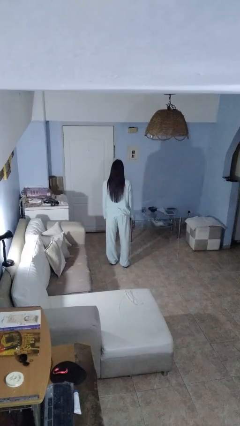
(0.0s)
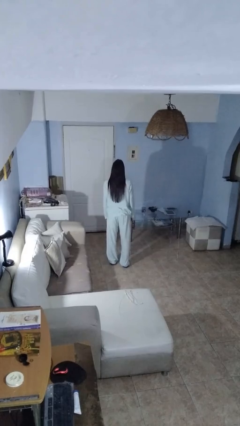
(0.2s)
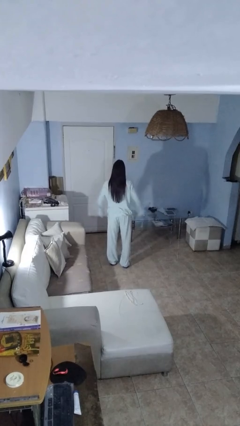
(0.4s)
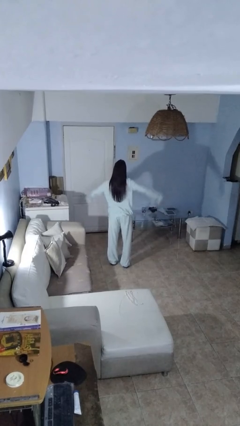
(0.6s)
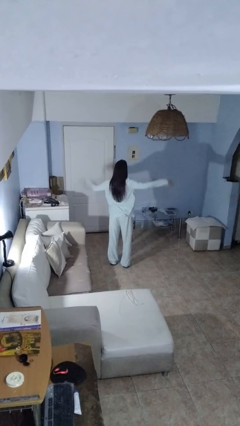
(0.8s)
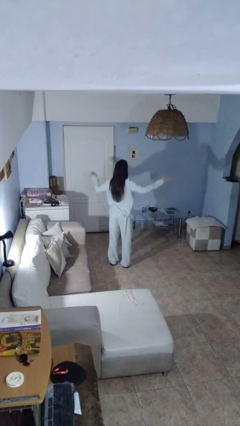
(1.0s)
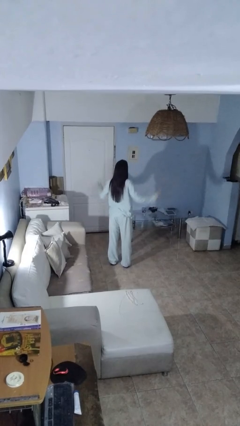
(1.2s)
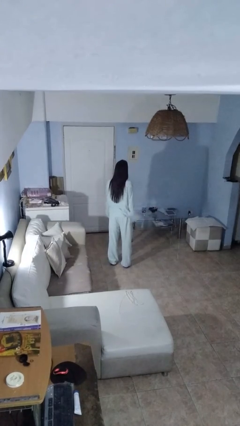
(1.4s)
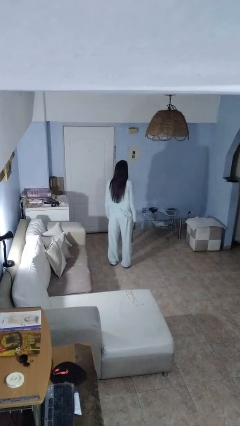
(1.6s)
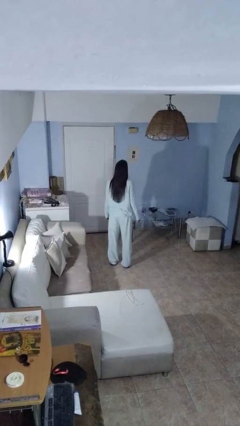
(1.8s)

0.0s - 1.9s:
person slaps hands on thighs

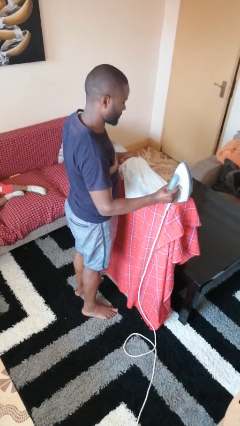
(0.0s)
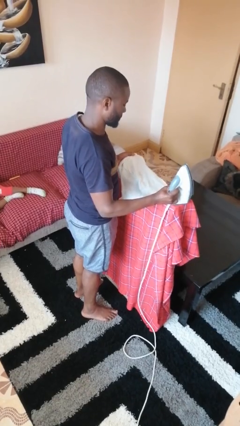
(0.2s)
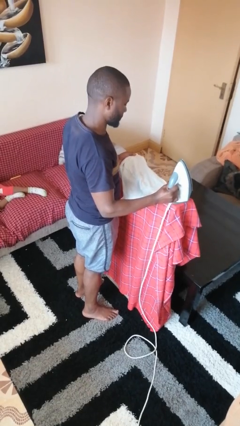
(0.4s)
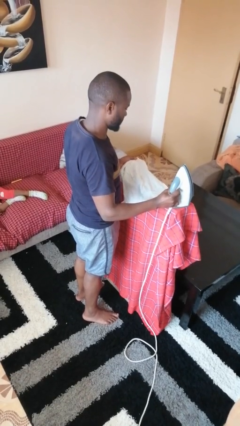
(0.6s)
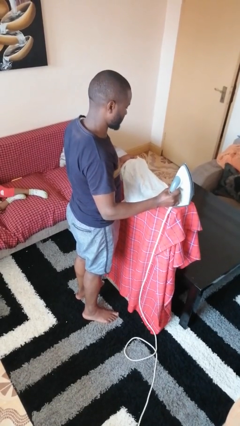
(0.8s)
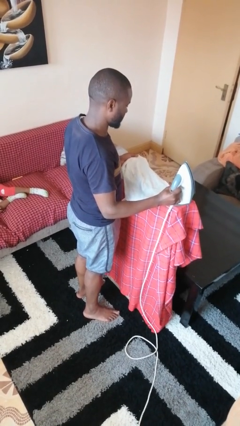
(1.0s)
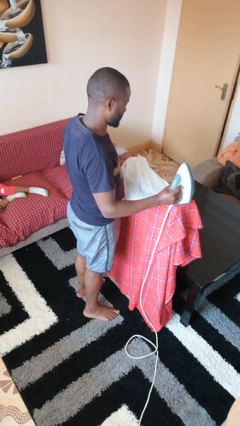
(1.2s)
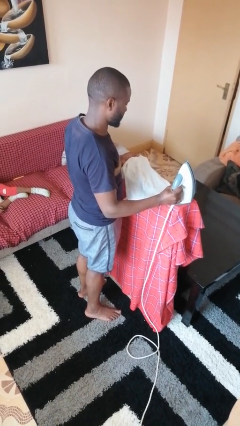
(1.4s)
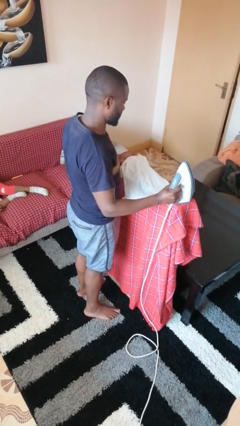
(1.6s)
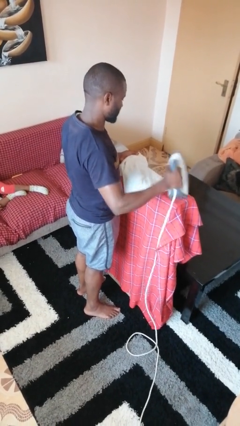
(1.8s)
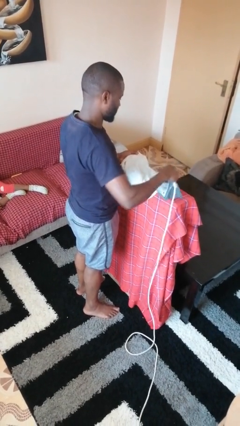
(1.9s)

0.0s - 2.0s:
person irons clothes

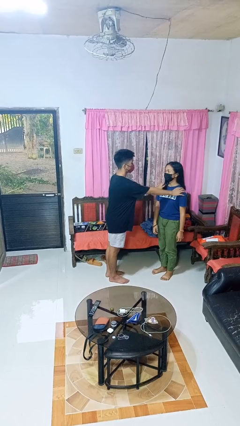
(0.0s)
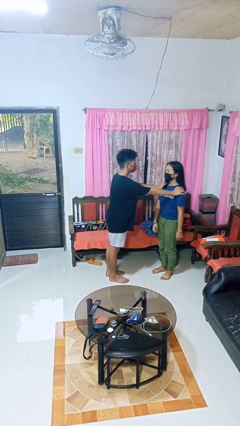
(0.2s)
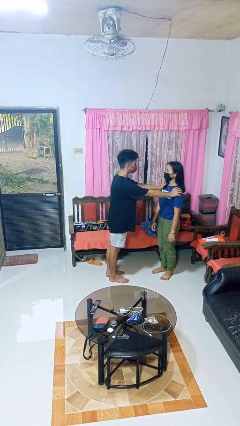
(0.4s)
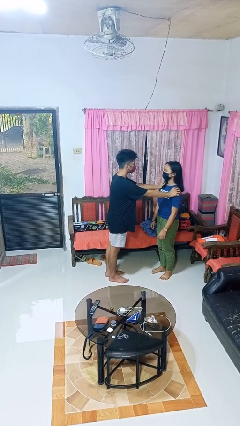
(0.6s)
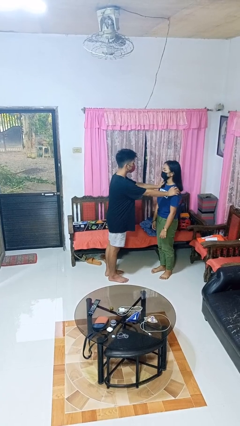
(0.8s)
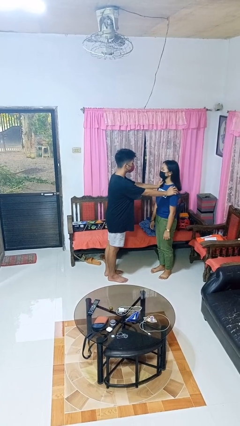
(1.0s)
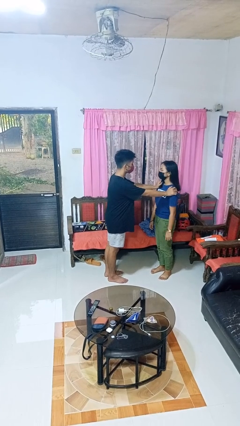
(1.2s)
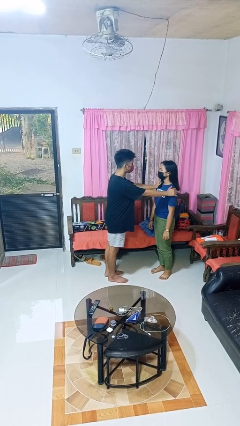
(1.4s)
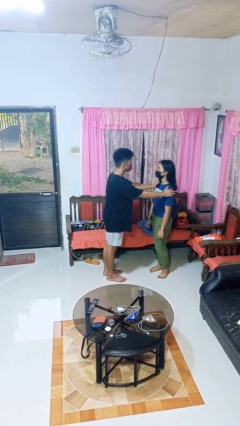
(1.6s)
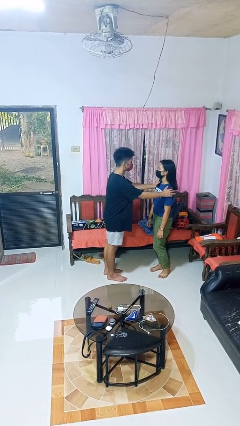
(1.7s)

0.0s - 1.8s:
person grabs person by shoulder

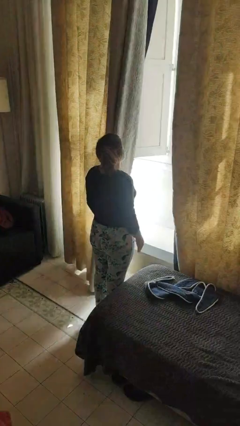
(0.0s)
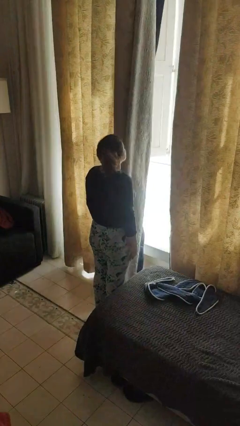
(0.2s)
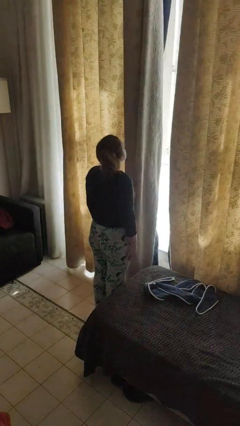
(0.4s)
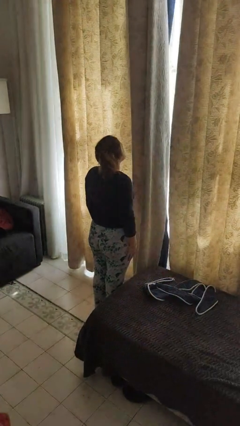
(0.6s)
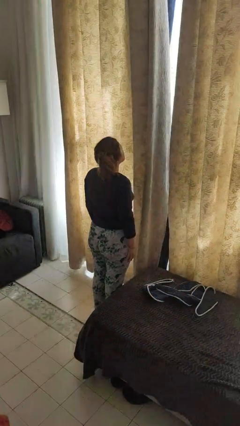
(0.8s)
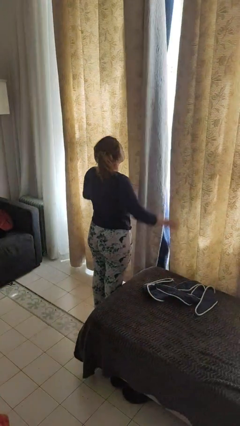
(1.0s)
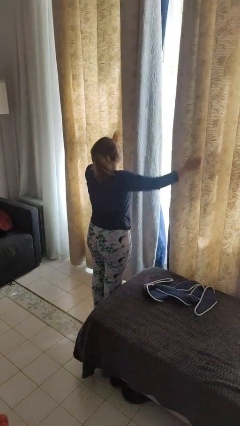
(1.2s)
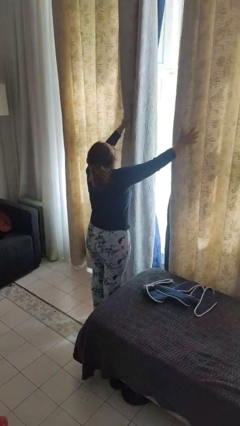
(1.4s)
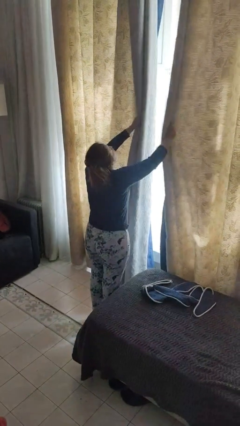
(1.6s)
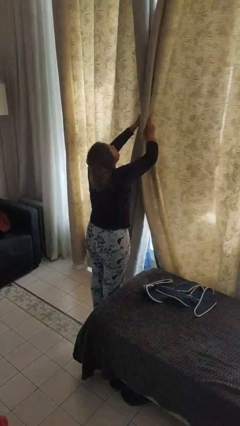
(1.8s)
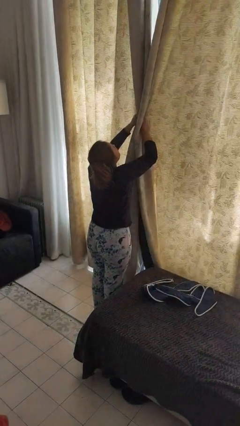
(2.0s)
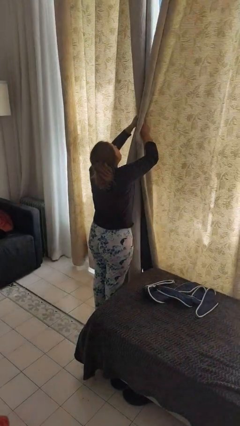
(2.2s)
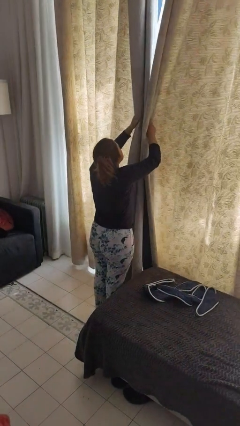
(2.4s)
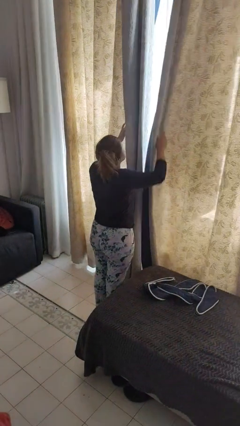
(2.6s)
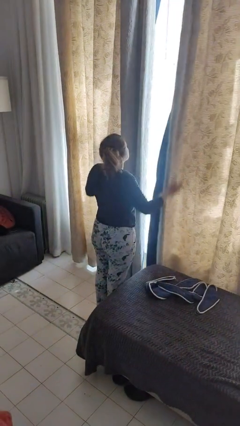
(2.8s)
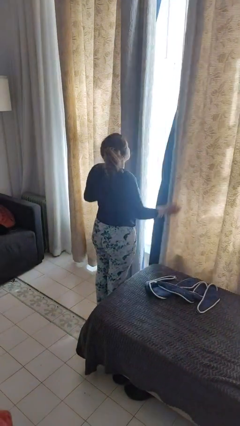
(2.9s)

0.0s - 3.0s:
person closes curtains

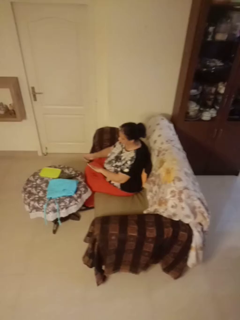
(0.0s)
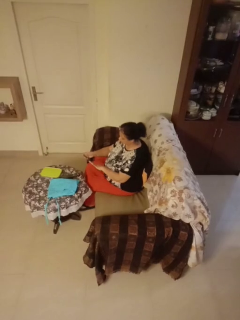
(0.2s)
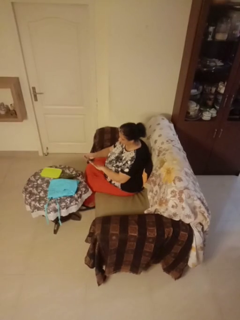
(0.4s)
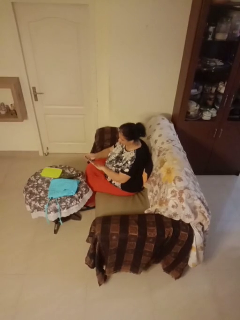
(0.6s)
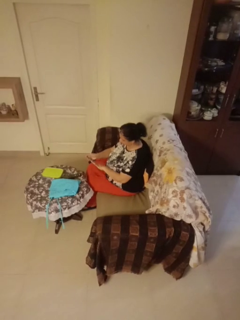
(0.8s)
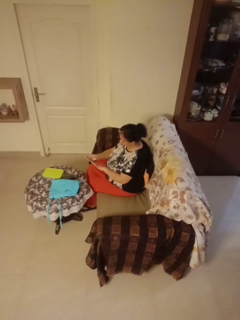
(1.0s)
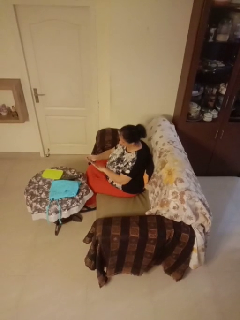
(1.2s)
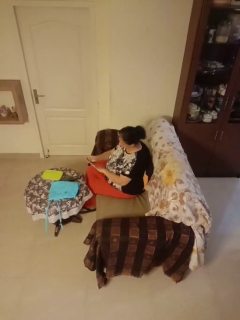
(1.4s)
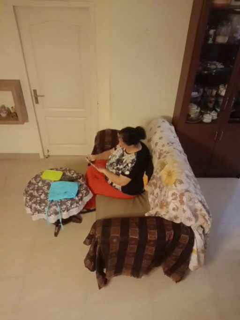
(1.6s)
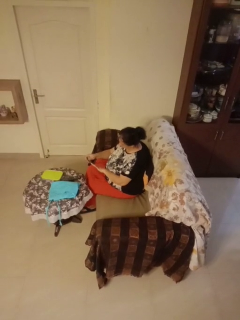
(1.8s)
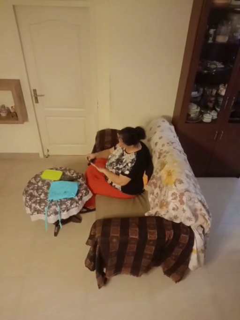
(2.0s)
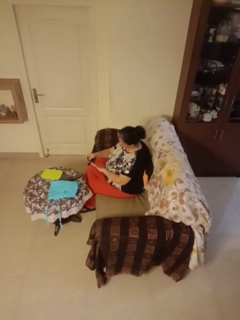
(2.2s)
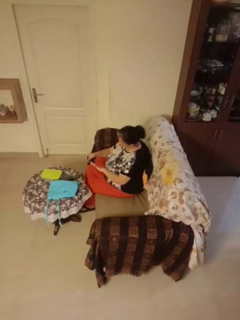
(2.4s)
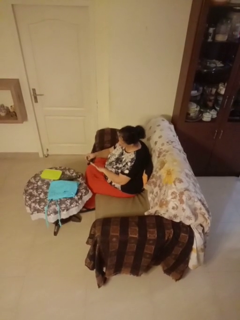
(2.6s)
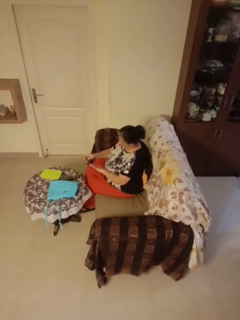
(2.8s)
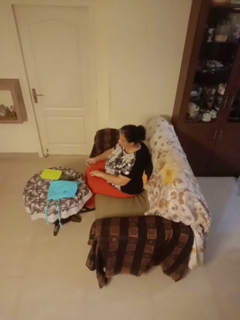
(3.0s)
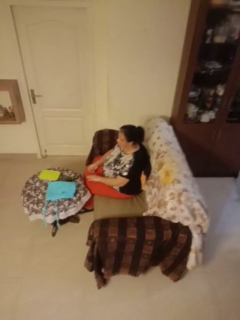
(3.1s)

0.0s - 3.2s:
person clips fingernails

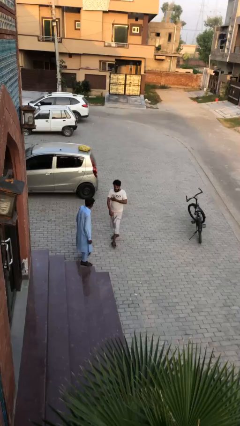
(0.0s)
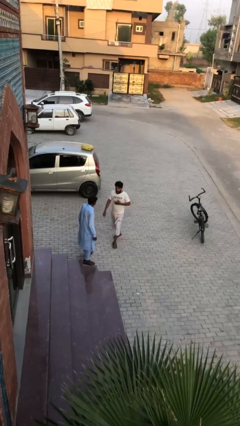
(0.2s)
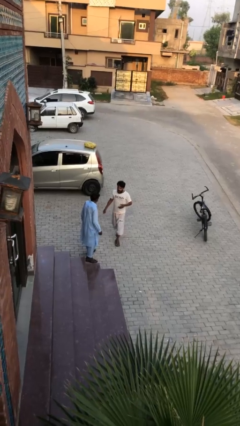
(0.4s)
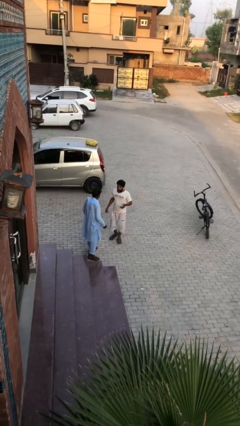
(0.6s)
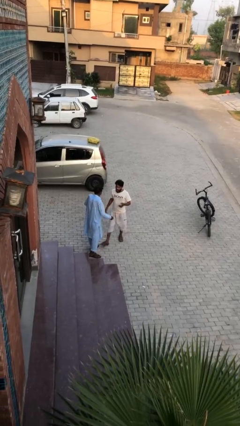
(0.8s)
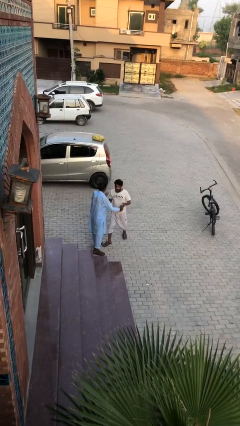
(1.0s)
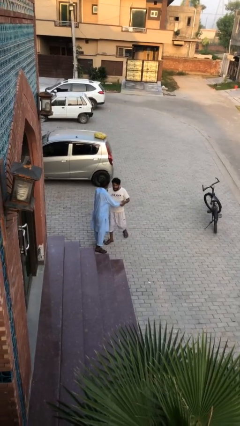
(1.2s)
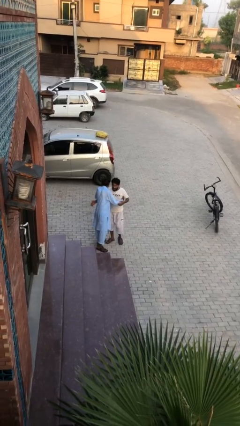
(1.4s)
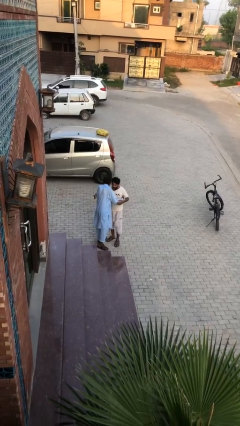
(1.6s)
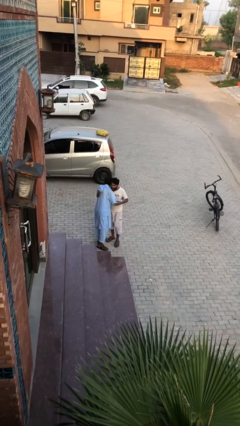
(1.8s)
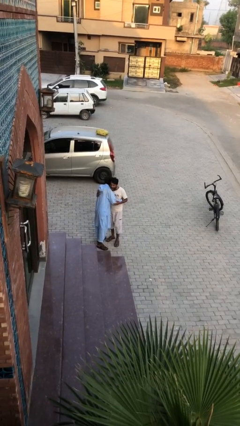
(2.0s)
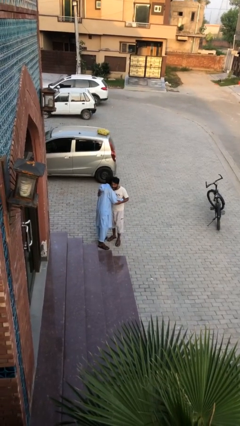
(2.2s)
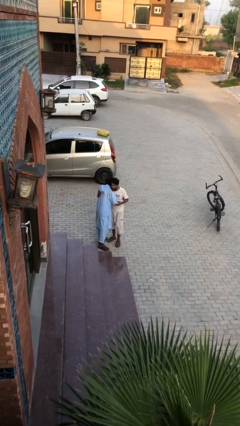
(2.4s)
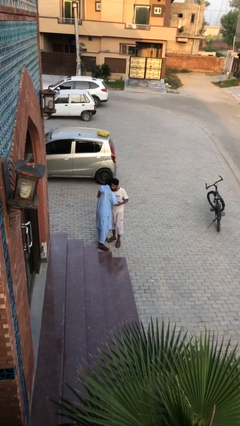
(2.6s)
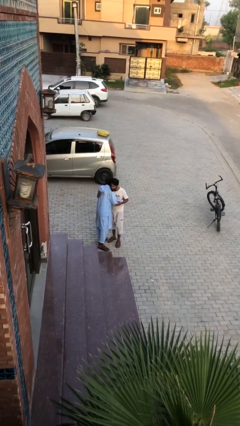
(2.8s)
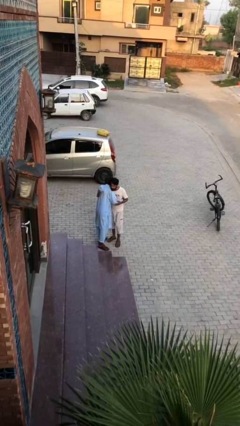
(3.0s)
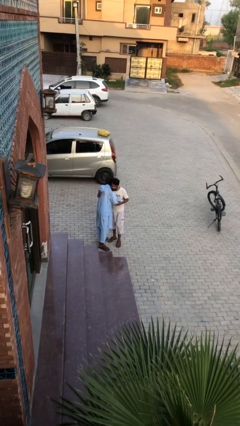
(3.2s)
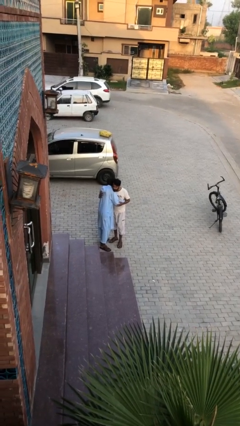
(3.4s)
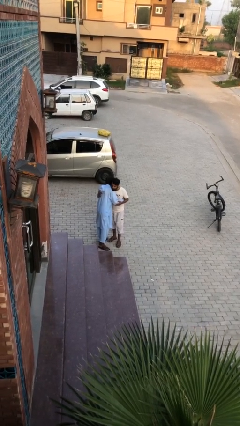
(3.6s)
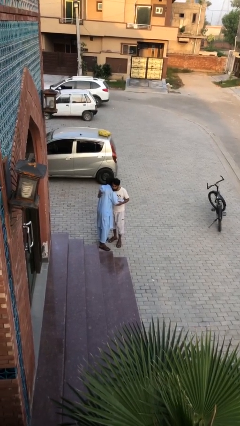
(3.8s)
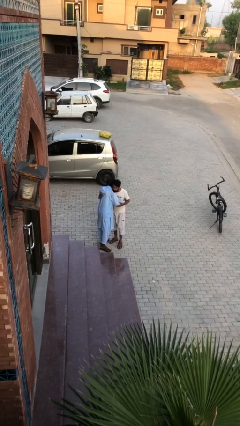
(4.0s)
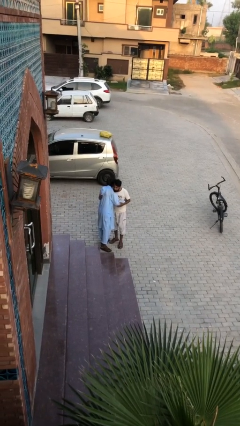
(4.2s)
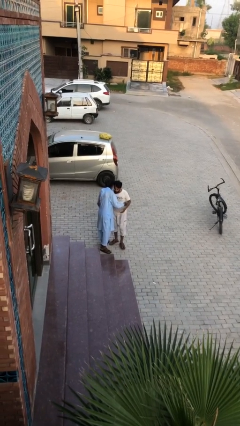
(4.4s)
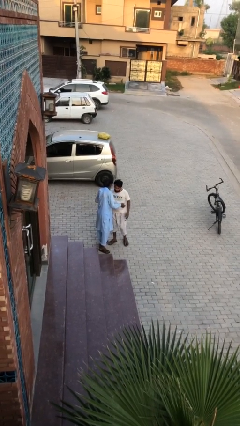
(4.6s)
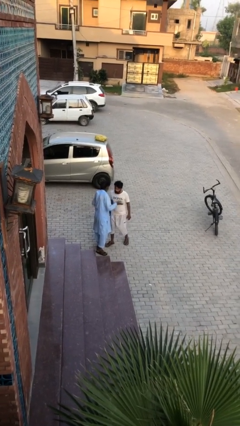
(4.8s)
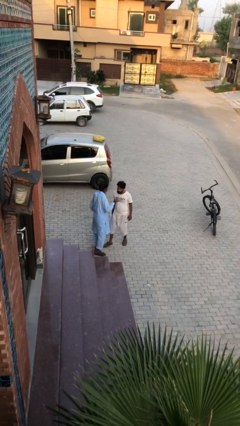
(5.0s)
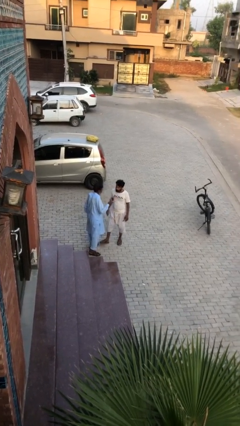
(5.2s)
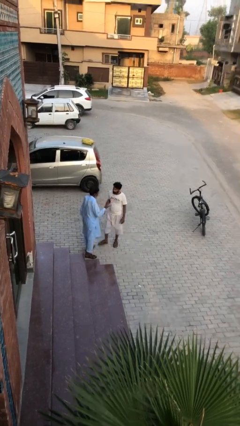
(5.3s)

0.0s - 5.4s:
person embraces person

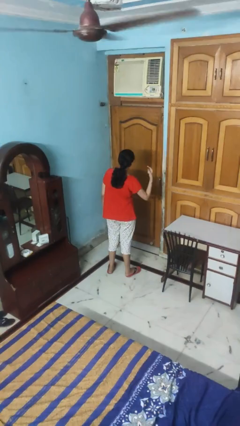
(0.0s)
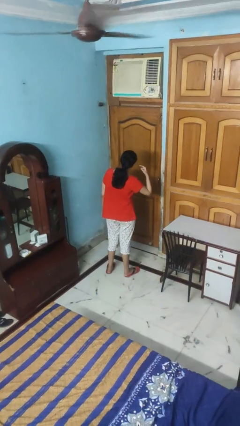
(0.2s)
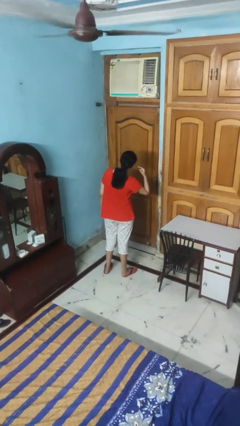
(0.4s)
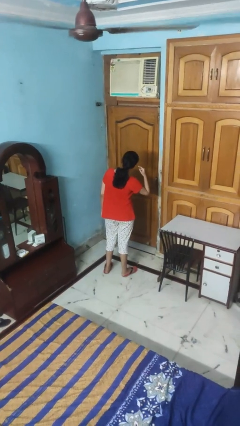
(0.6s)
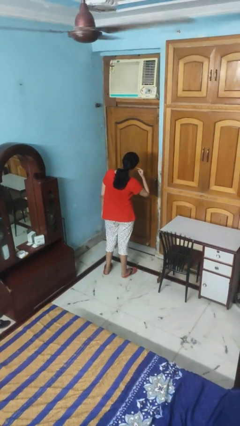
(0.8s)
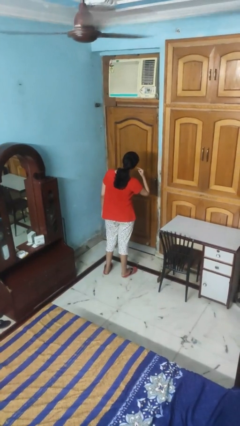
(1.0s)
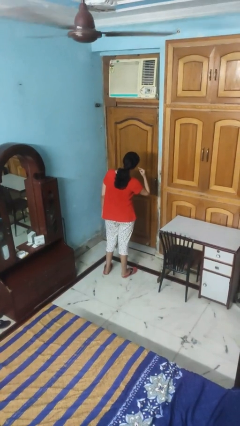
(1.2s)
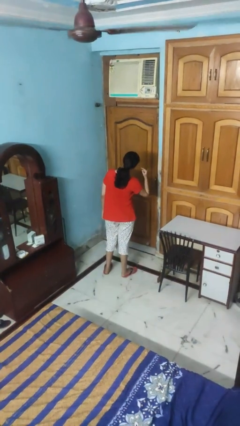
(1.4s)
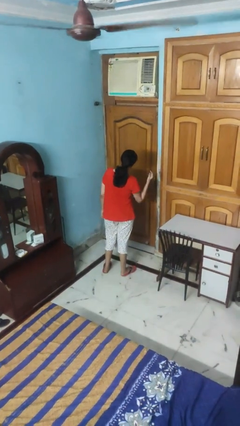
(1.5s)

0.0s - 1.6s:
person gestures listen closely
